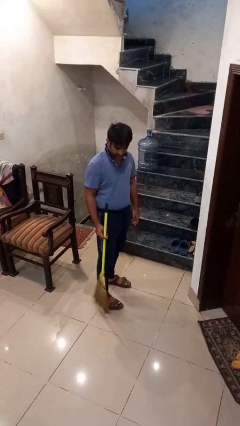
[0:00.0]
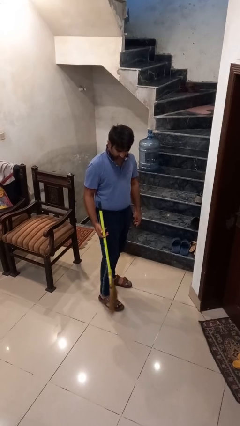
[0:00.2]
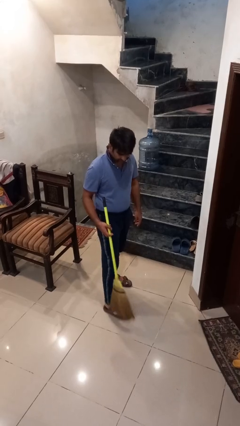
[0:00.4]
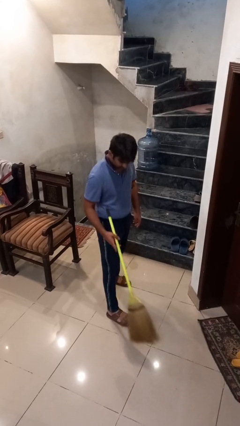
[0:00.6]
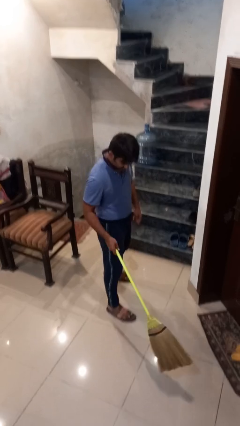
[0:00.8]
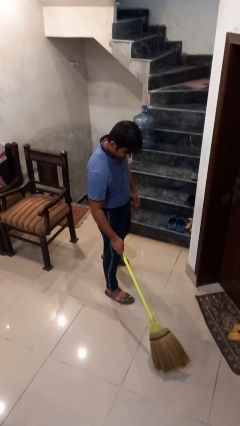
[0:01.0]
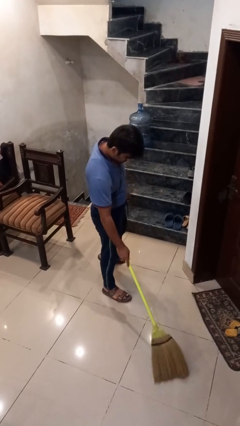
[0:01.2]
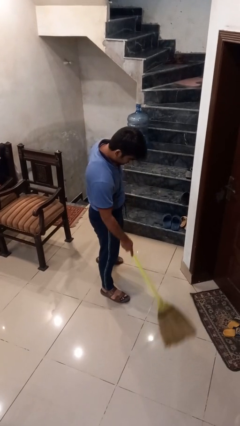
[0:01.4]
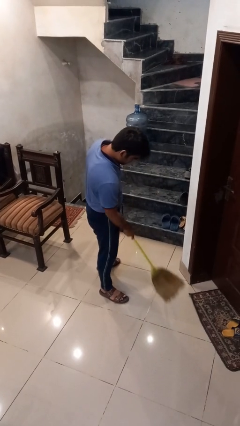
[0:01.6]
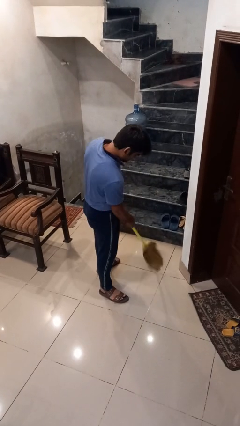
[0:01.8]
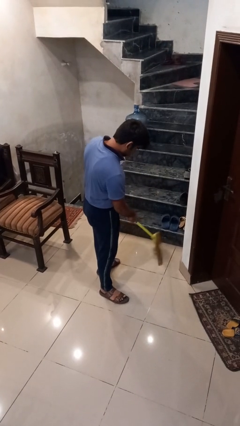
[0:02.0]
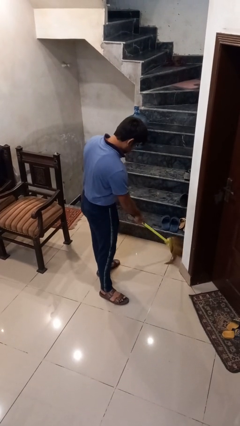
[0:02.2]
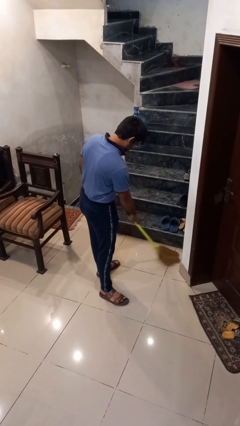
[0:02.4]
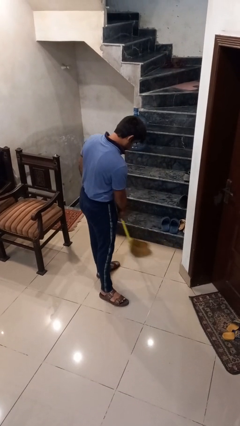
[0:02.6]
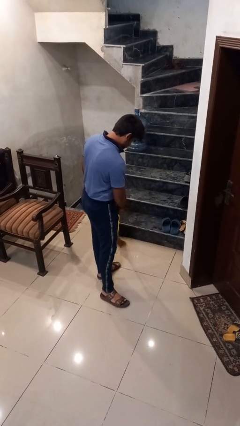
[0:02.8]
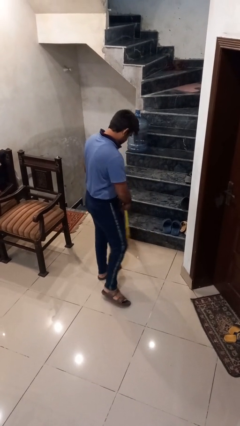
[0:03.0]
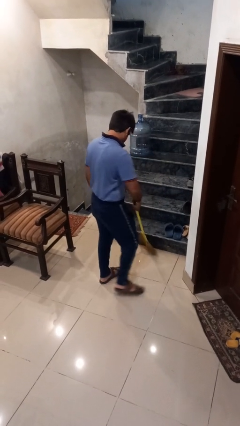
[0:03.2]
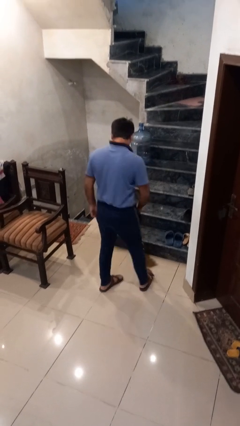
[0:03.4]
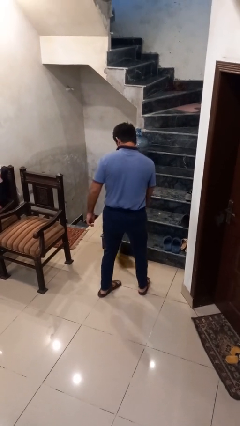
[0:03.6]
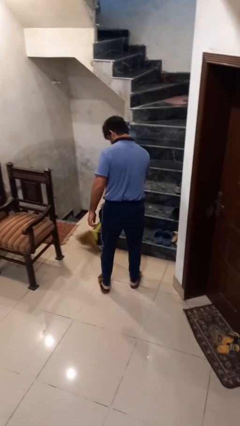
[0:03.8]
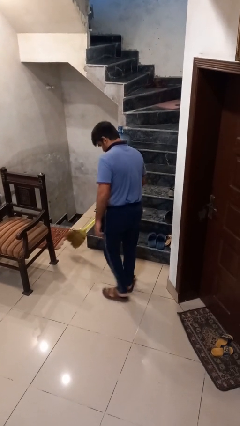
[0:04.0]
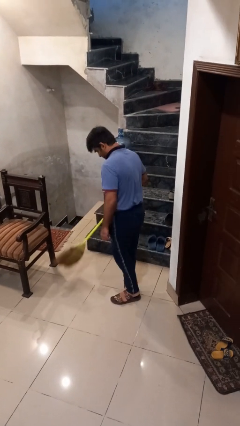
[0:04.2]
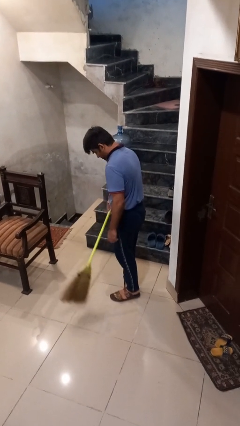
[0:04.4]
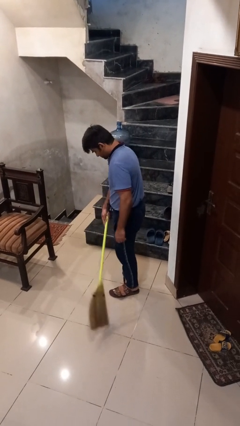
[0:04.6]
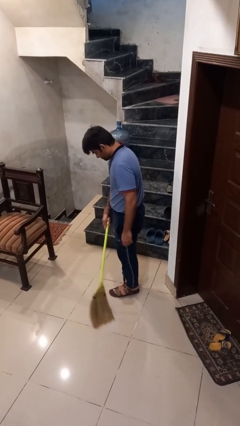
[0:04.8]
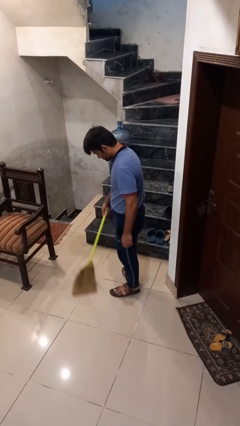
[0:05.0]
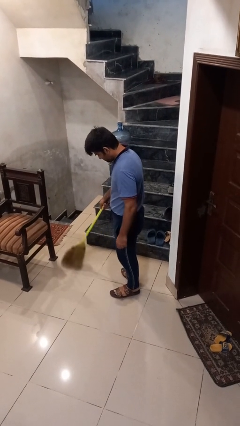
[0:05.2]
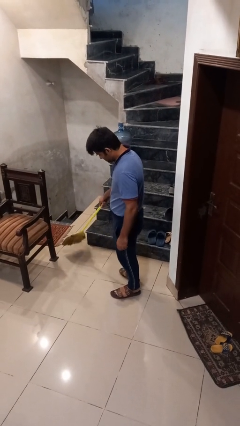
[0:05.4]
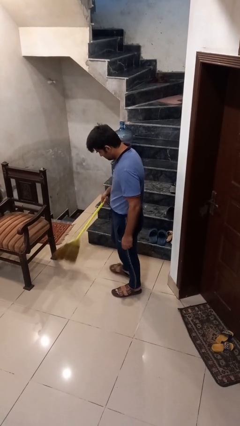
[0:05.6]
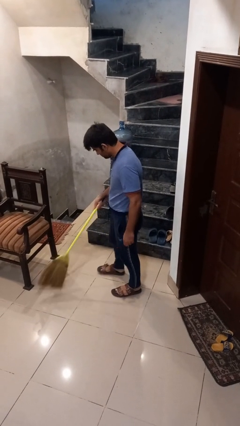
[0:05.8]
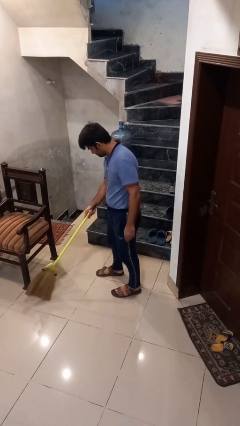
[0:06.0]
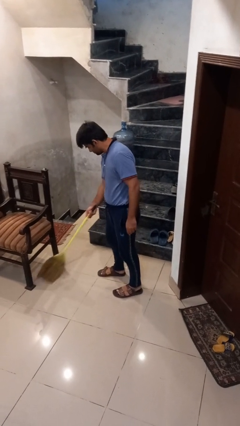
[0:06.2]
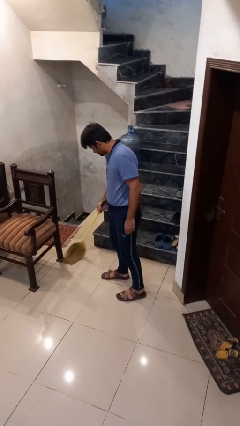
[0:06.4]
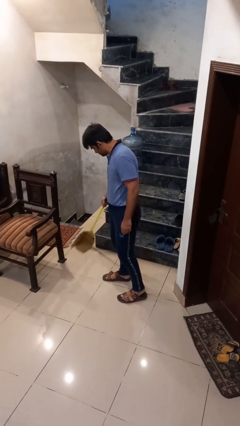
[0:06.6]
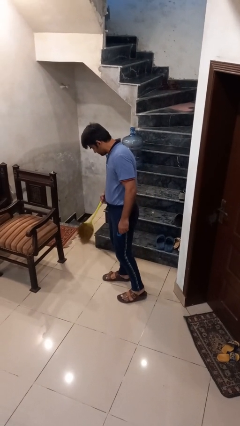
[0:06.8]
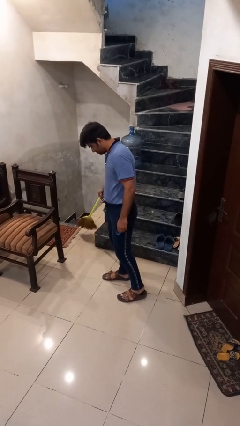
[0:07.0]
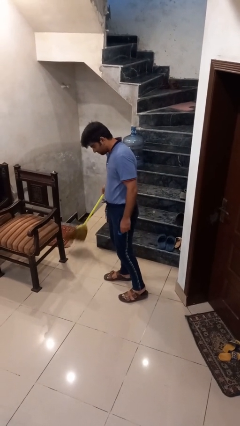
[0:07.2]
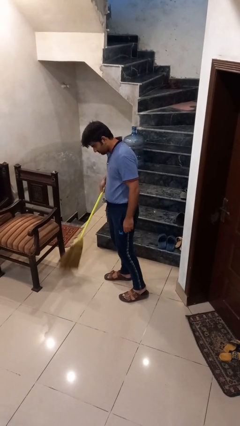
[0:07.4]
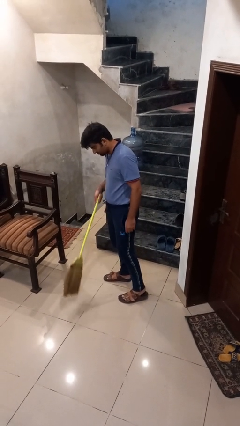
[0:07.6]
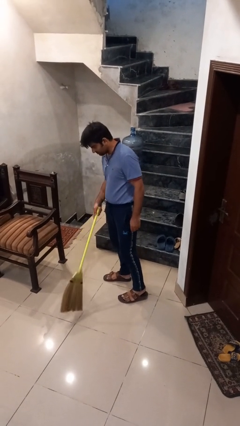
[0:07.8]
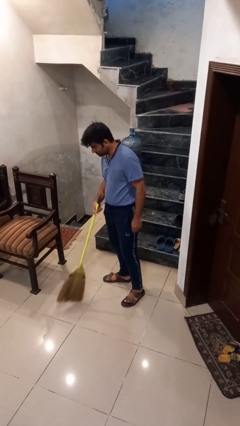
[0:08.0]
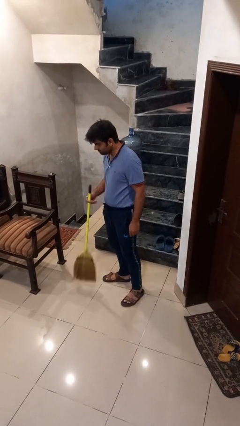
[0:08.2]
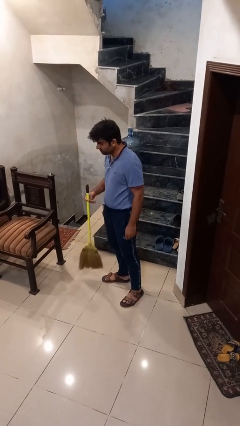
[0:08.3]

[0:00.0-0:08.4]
person sweeps floor

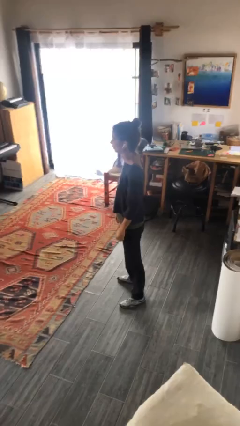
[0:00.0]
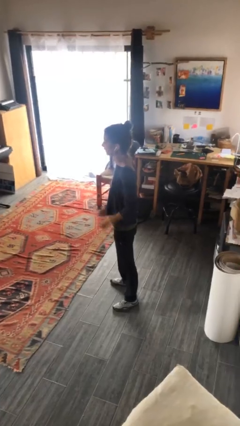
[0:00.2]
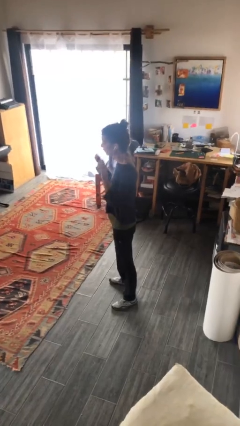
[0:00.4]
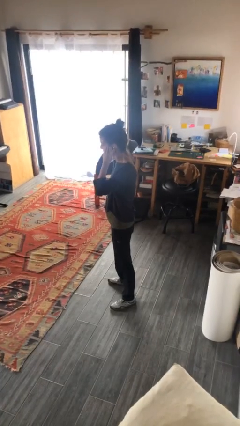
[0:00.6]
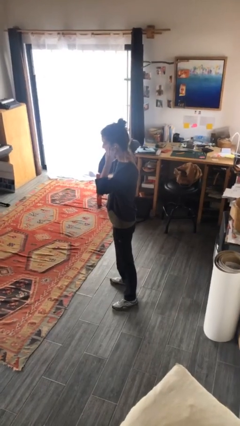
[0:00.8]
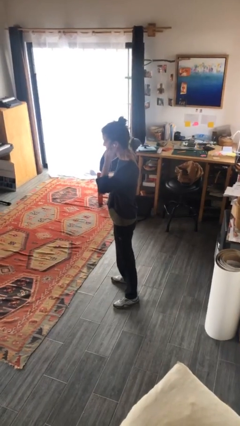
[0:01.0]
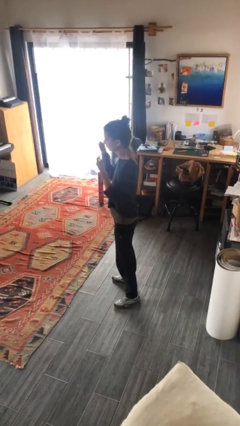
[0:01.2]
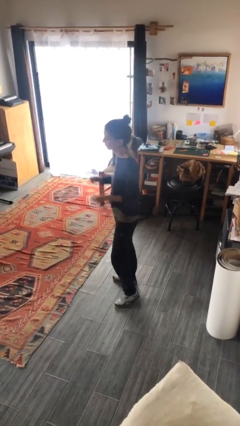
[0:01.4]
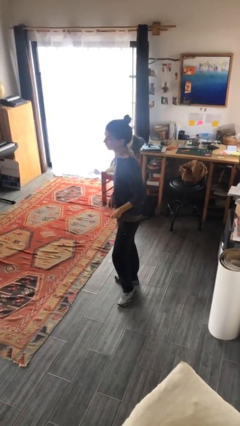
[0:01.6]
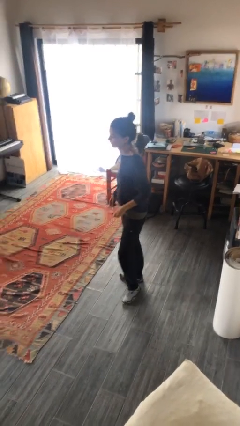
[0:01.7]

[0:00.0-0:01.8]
person takes off headphones

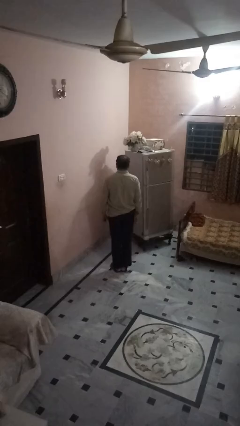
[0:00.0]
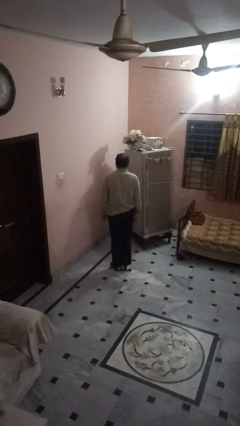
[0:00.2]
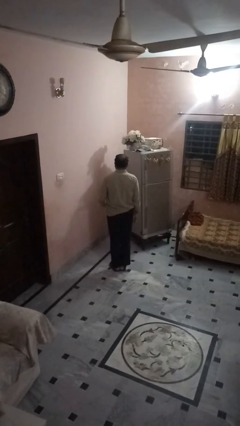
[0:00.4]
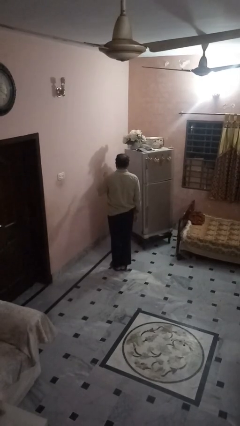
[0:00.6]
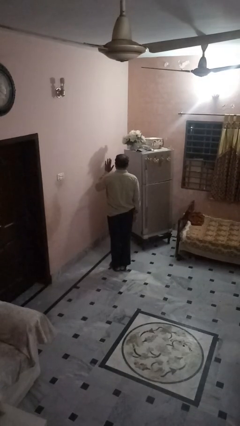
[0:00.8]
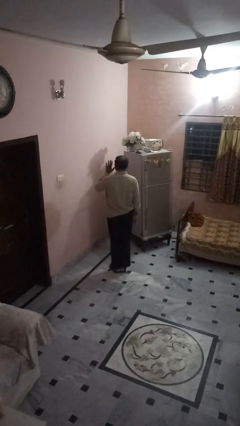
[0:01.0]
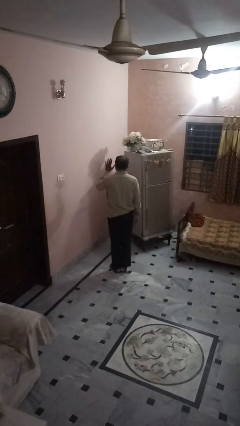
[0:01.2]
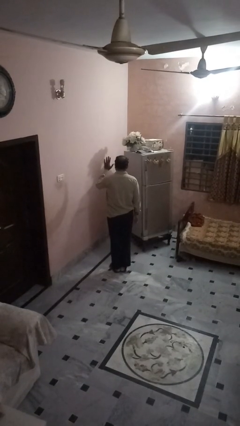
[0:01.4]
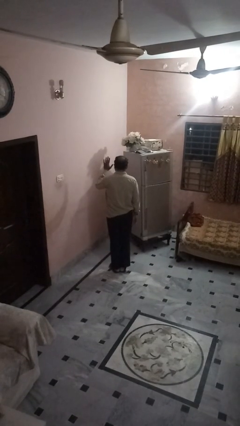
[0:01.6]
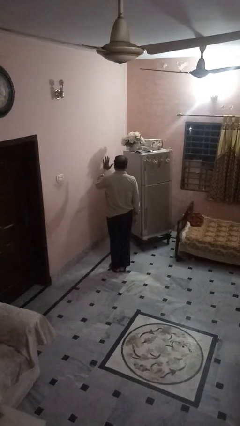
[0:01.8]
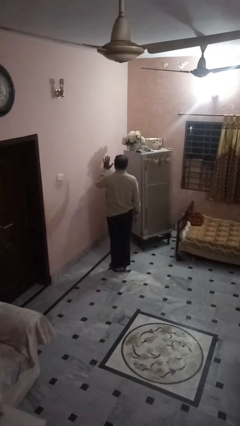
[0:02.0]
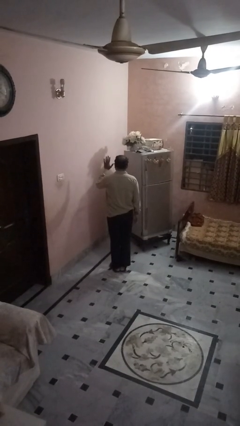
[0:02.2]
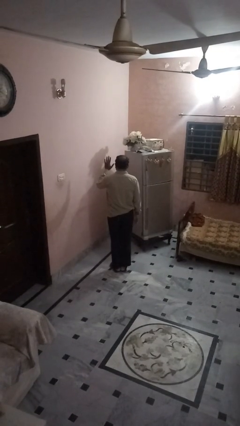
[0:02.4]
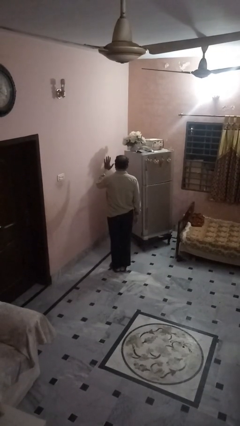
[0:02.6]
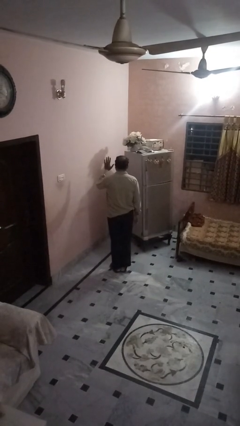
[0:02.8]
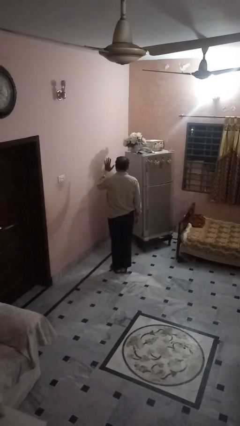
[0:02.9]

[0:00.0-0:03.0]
person gestures number five

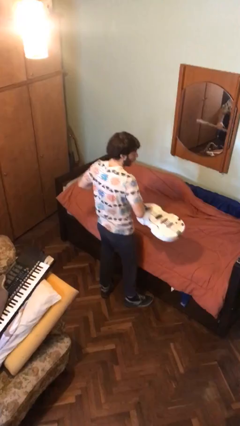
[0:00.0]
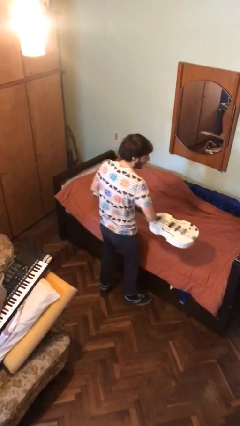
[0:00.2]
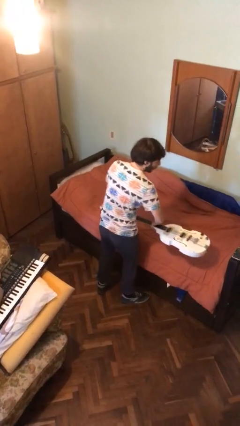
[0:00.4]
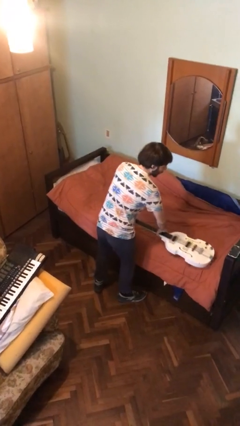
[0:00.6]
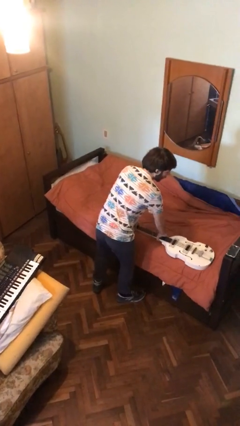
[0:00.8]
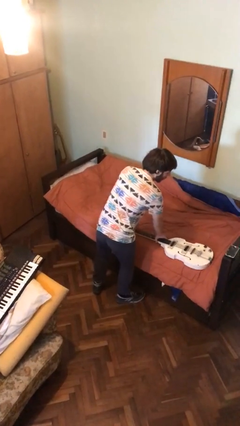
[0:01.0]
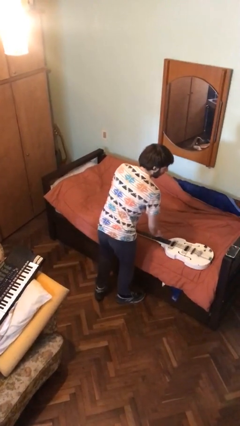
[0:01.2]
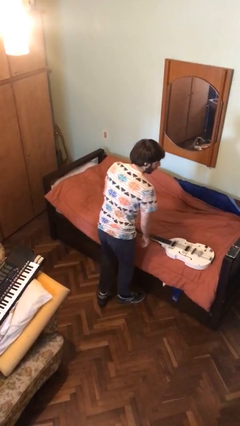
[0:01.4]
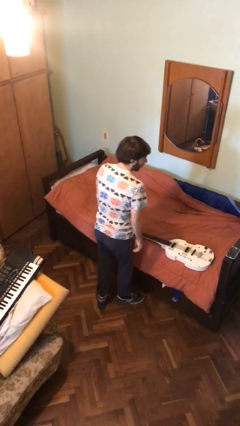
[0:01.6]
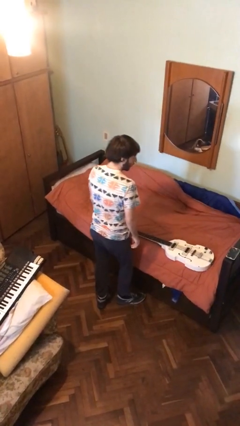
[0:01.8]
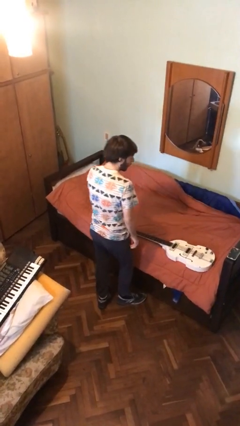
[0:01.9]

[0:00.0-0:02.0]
person puts down object on bed

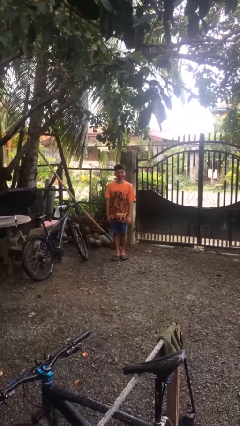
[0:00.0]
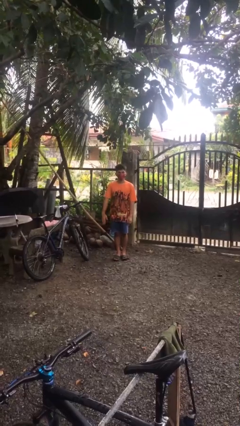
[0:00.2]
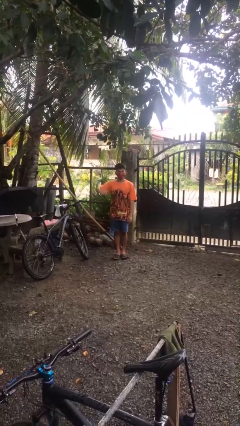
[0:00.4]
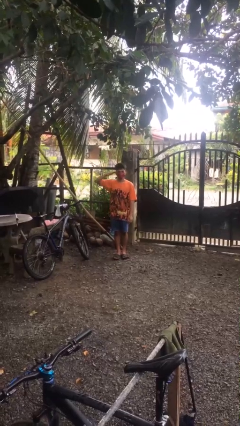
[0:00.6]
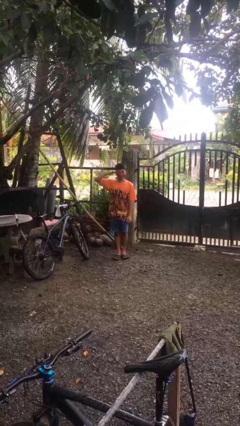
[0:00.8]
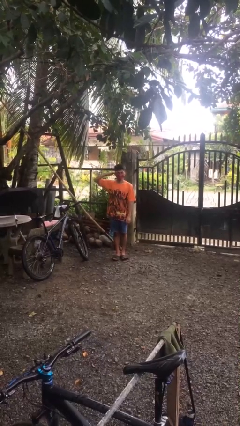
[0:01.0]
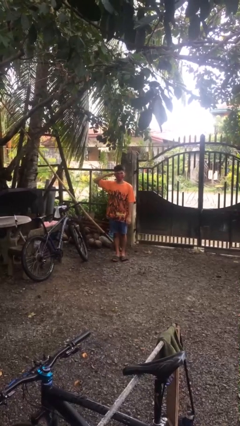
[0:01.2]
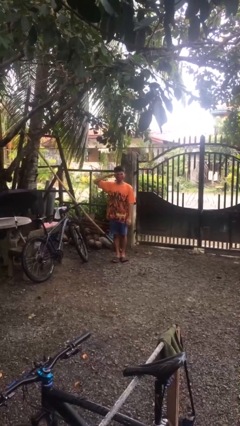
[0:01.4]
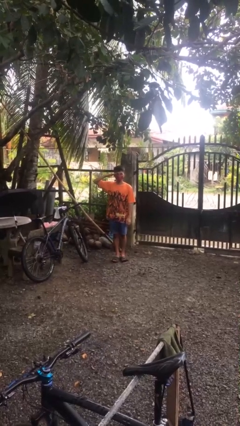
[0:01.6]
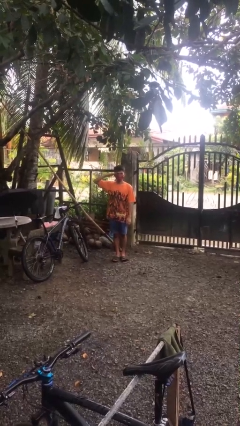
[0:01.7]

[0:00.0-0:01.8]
person salutes

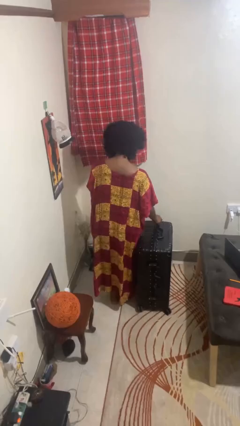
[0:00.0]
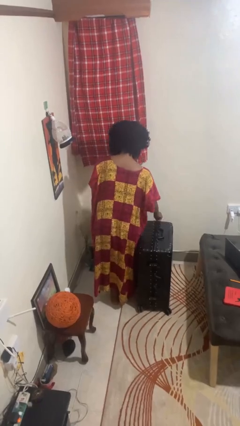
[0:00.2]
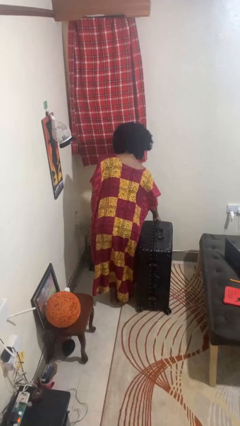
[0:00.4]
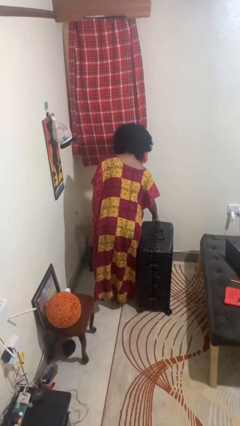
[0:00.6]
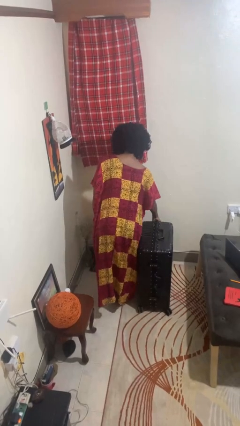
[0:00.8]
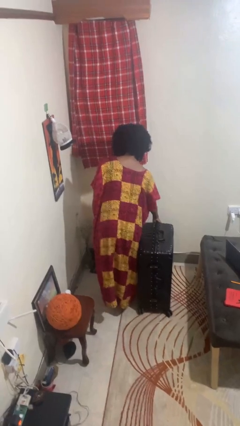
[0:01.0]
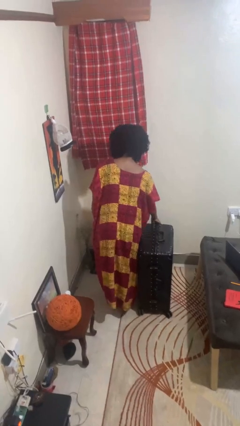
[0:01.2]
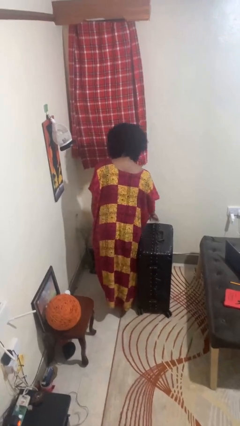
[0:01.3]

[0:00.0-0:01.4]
person closes suitcase
